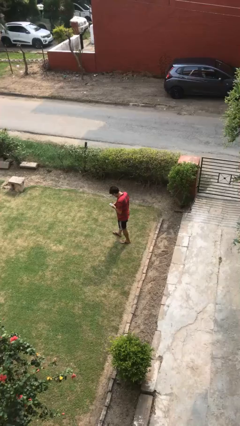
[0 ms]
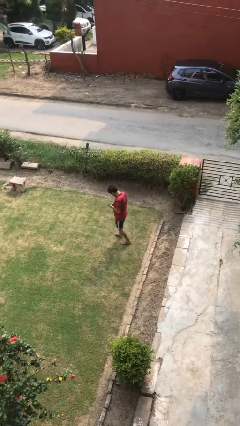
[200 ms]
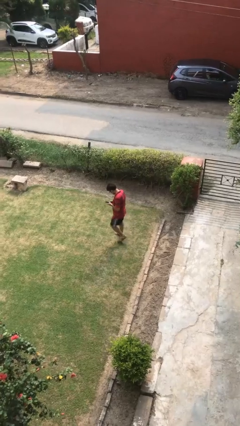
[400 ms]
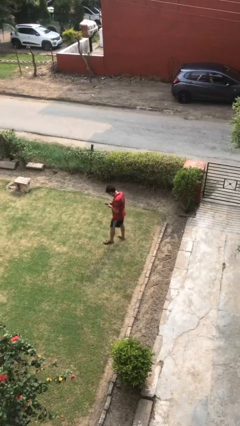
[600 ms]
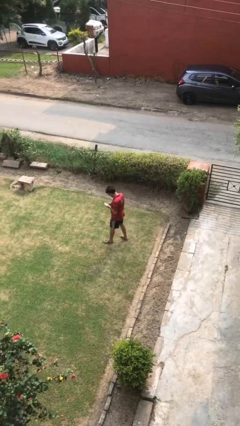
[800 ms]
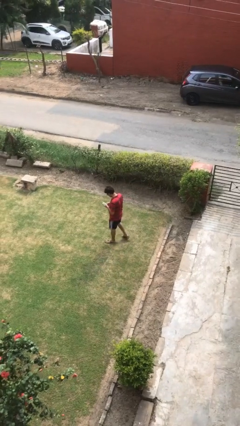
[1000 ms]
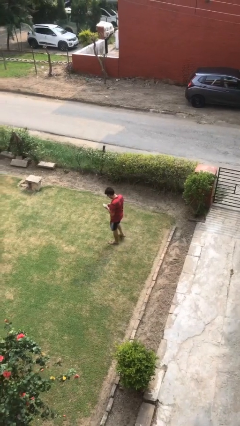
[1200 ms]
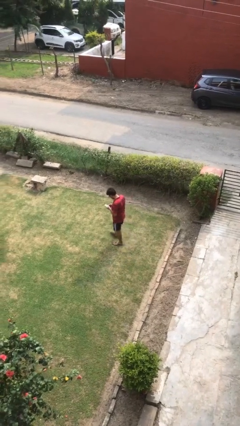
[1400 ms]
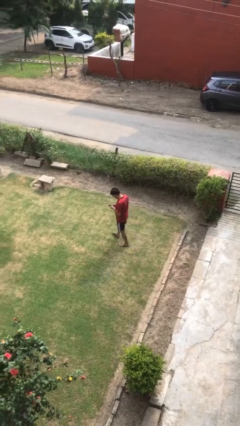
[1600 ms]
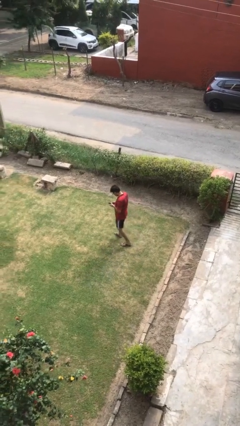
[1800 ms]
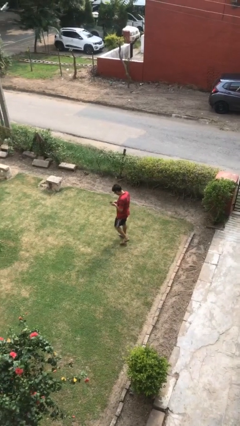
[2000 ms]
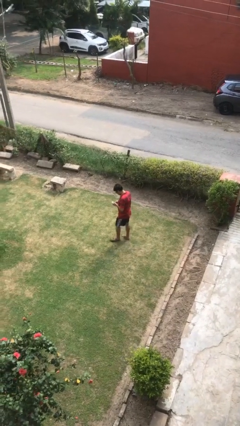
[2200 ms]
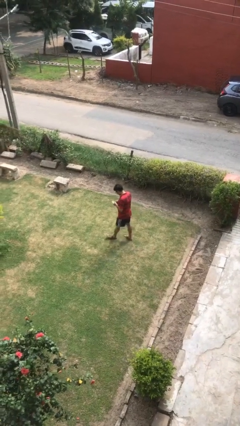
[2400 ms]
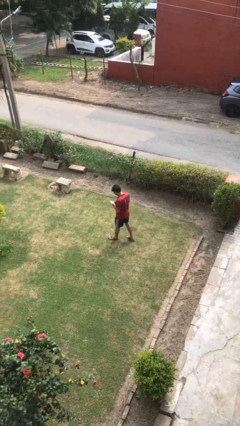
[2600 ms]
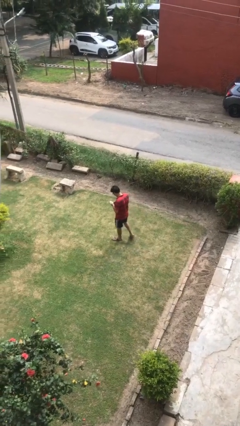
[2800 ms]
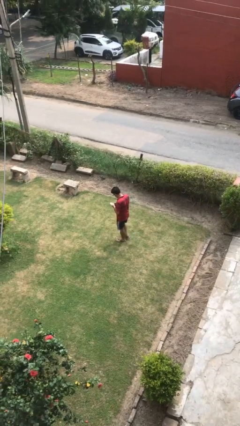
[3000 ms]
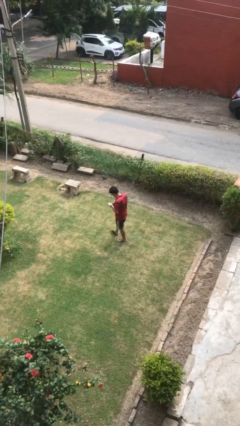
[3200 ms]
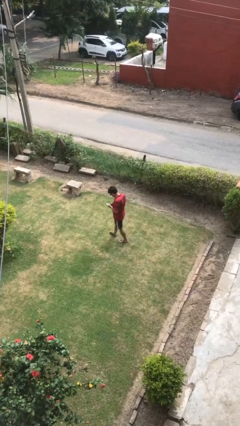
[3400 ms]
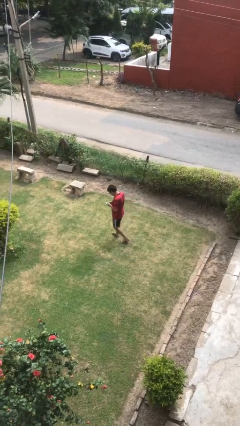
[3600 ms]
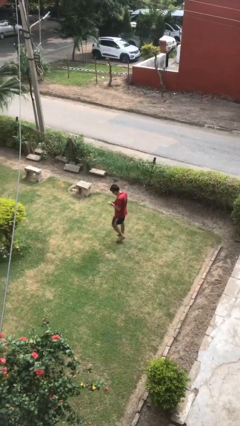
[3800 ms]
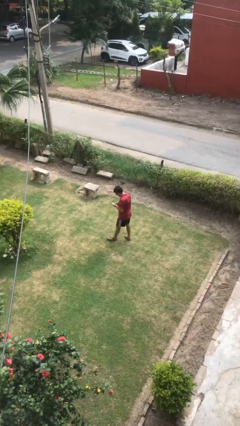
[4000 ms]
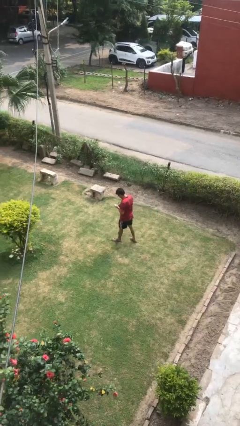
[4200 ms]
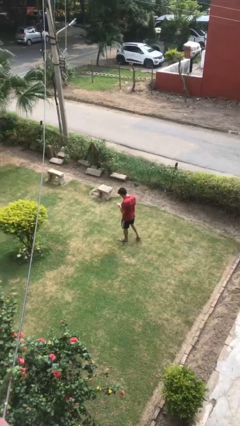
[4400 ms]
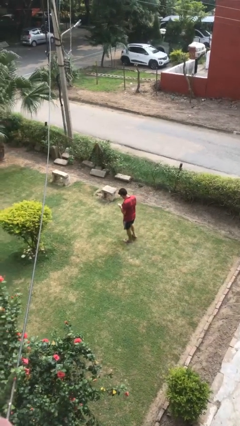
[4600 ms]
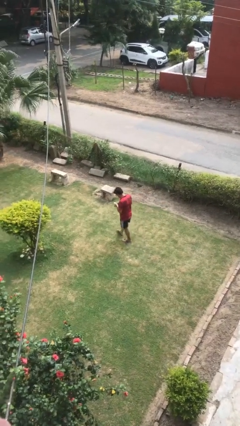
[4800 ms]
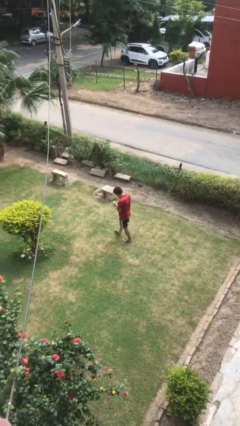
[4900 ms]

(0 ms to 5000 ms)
person texts on phone

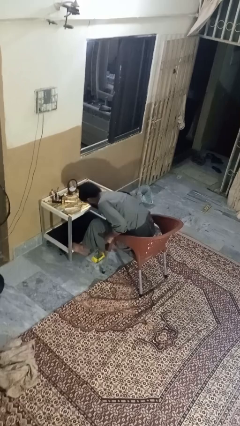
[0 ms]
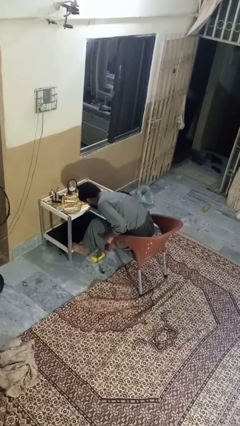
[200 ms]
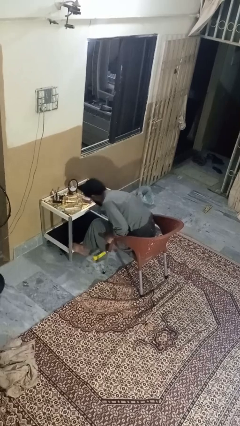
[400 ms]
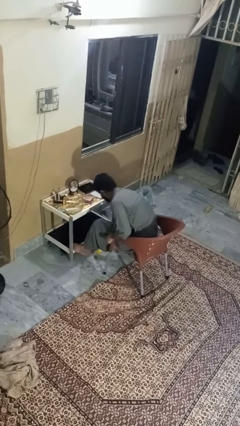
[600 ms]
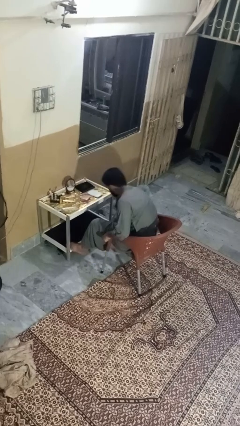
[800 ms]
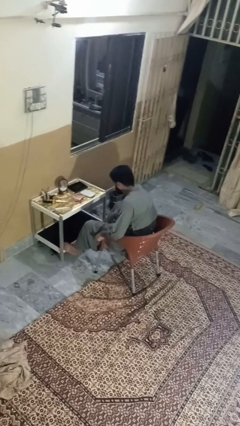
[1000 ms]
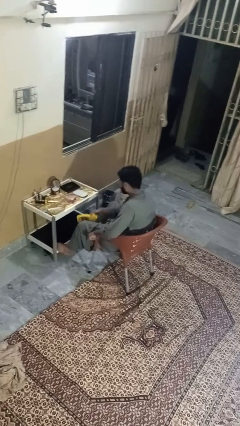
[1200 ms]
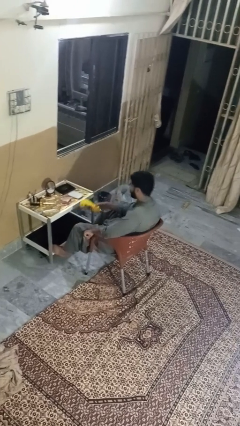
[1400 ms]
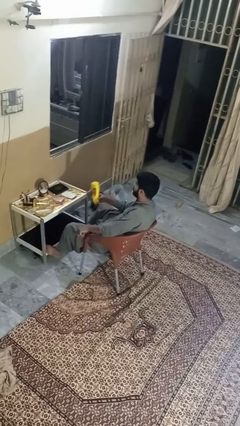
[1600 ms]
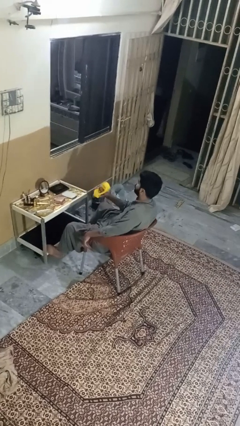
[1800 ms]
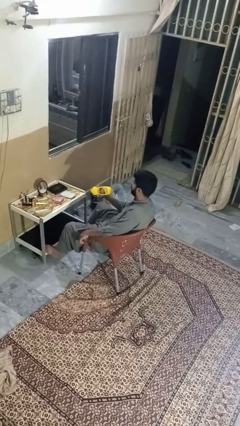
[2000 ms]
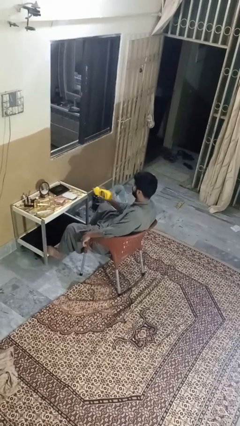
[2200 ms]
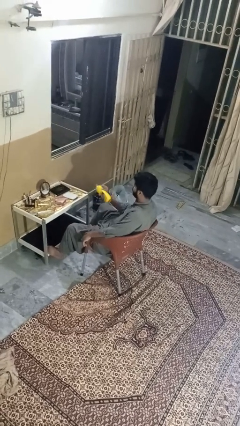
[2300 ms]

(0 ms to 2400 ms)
person picks up object from floor

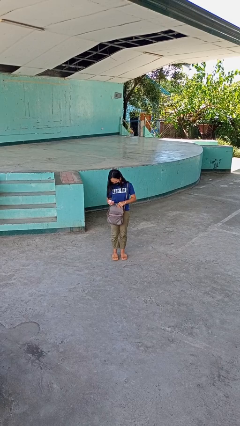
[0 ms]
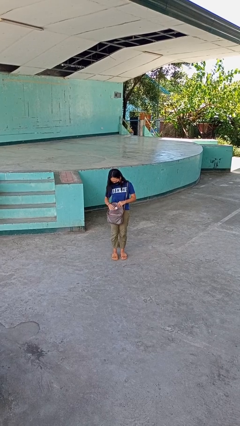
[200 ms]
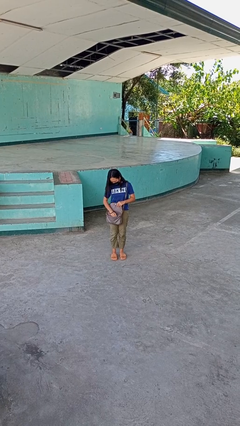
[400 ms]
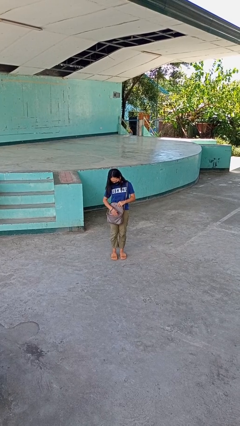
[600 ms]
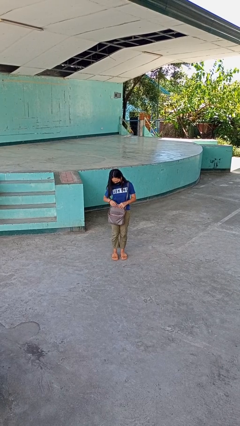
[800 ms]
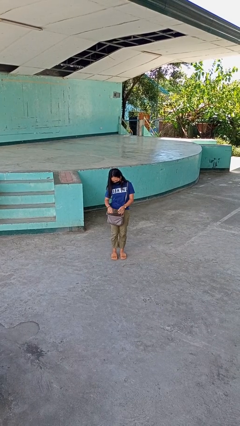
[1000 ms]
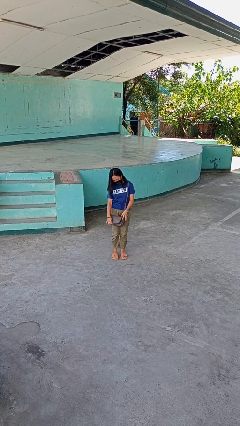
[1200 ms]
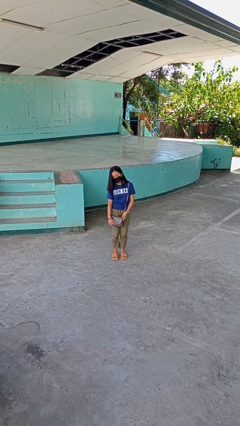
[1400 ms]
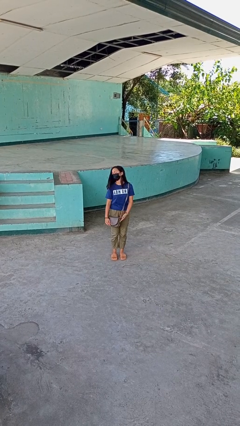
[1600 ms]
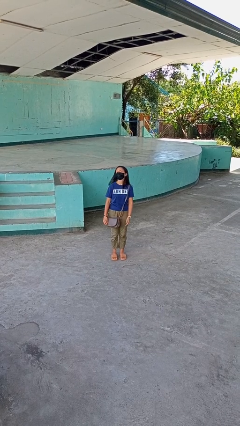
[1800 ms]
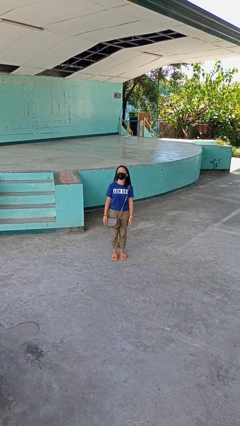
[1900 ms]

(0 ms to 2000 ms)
person puts object into purse

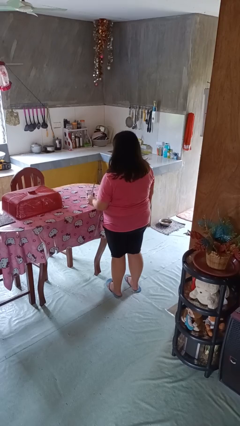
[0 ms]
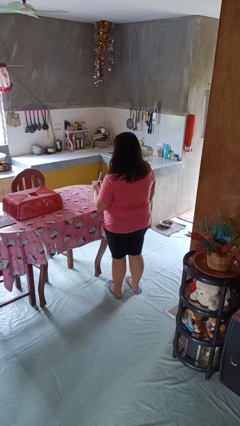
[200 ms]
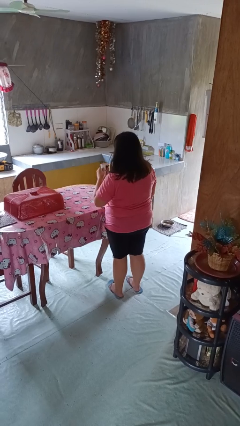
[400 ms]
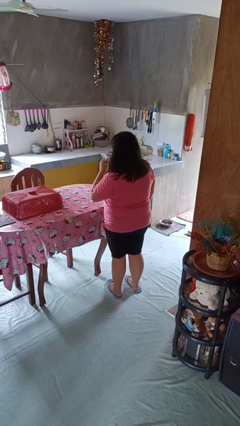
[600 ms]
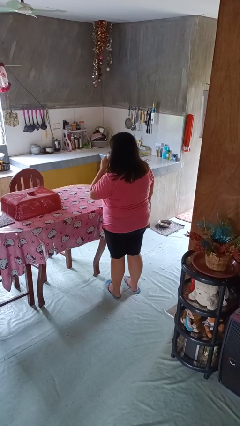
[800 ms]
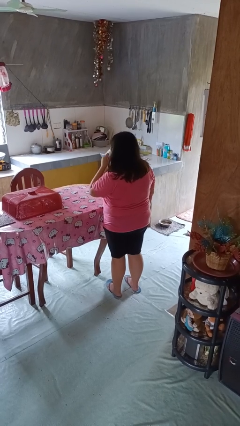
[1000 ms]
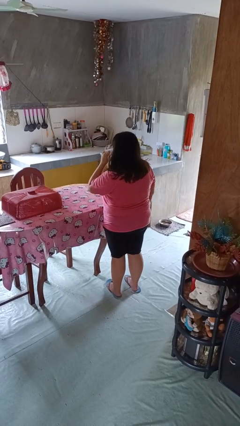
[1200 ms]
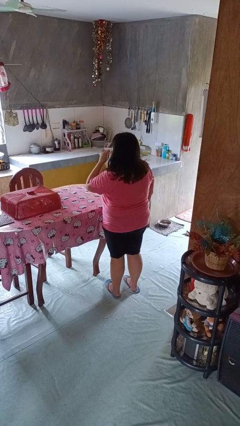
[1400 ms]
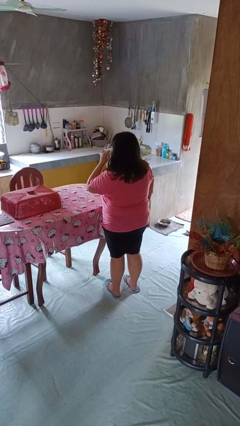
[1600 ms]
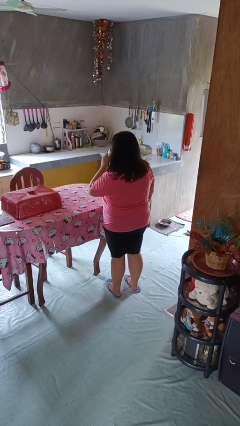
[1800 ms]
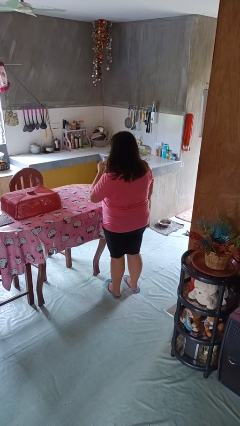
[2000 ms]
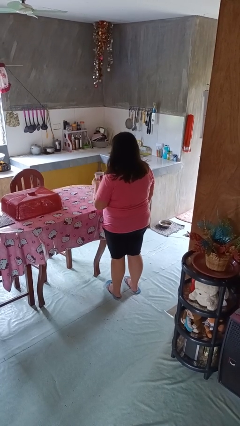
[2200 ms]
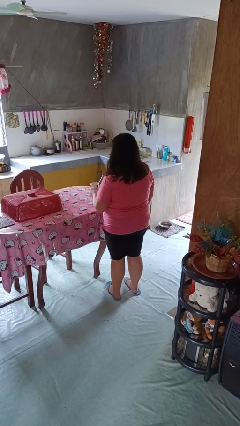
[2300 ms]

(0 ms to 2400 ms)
person drinks from mug

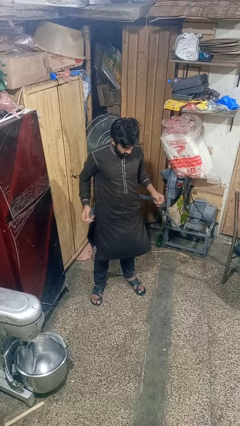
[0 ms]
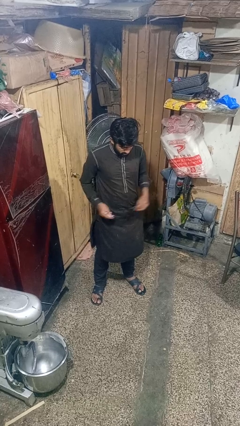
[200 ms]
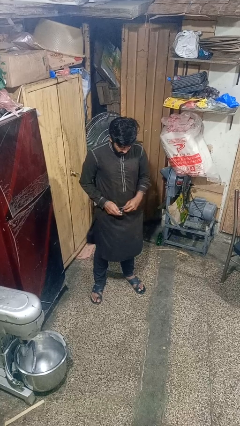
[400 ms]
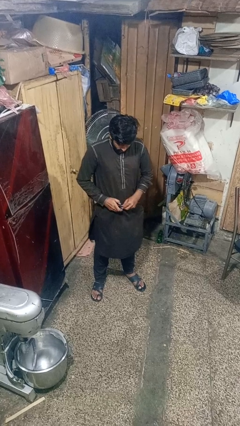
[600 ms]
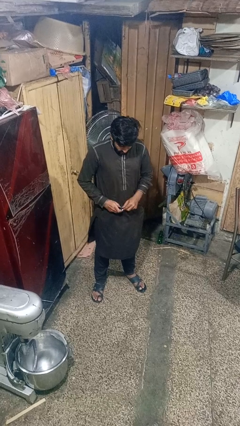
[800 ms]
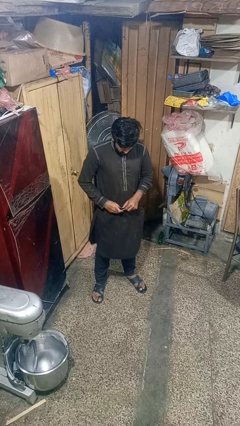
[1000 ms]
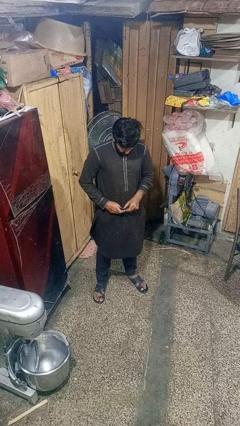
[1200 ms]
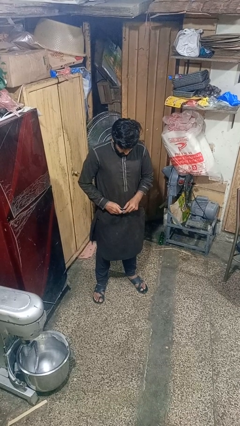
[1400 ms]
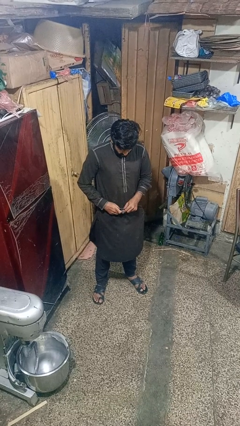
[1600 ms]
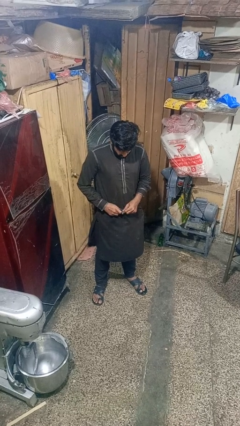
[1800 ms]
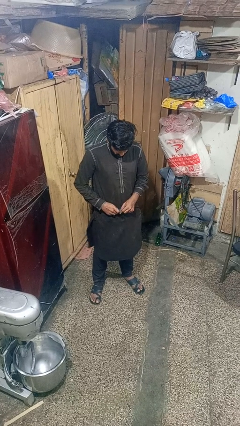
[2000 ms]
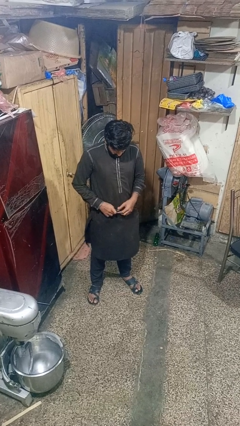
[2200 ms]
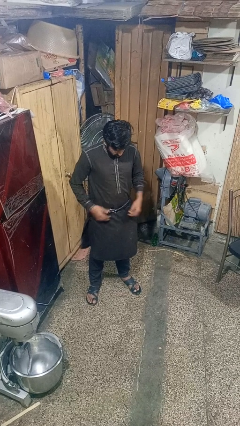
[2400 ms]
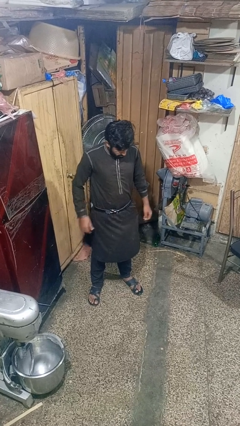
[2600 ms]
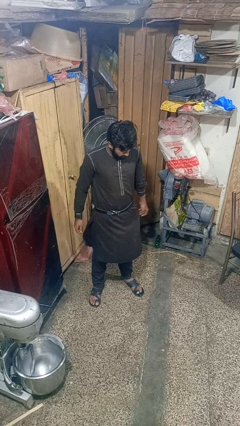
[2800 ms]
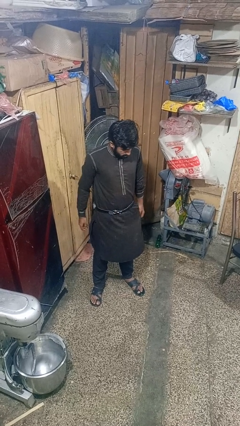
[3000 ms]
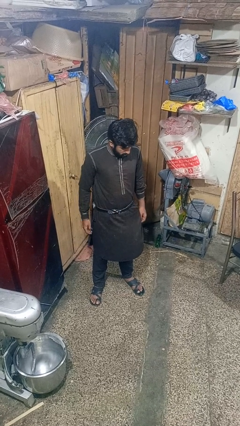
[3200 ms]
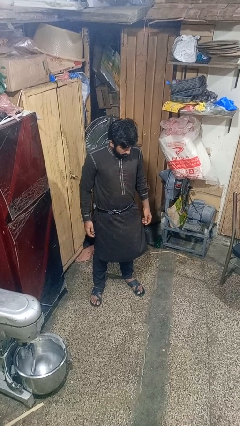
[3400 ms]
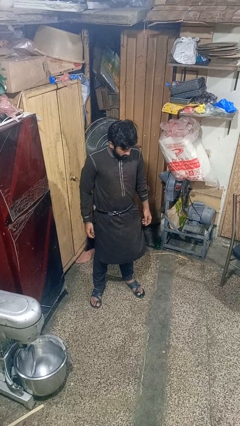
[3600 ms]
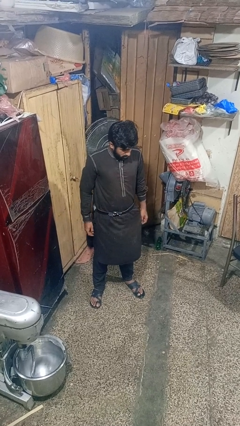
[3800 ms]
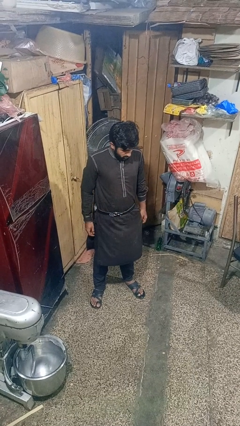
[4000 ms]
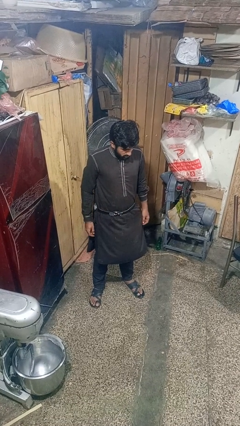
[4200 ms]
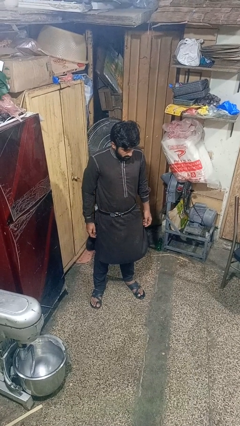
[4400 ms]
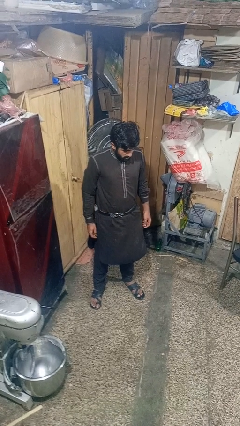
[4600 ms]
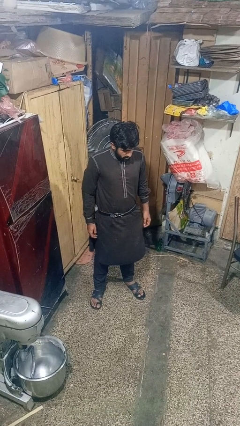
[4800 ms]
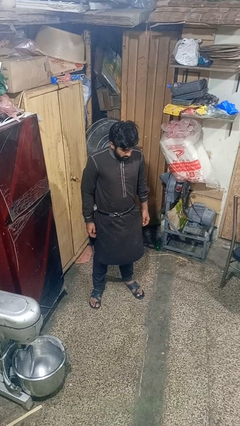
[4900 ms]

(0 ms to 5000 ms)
person puts on belt

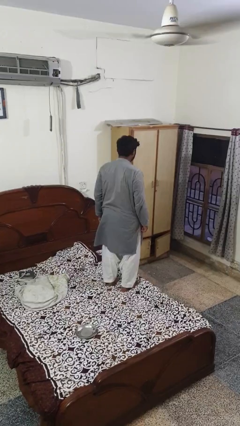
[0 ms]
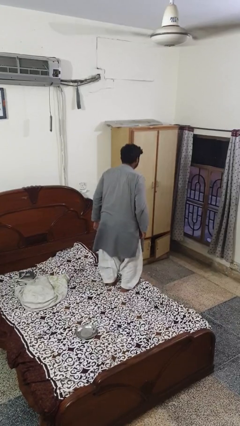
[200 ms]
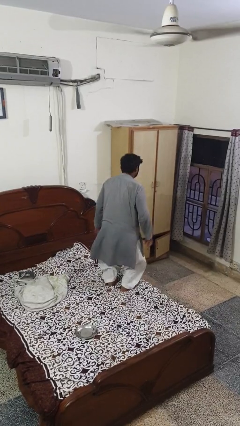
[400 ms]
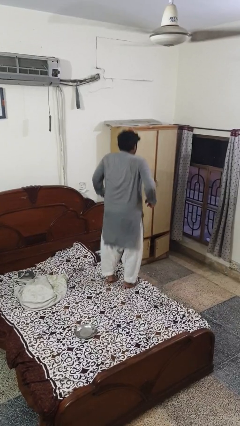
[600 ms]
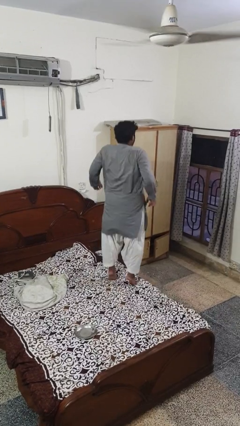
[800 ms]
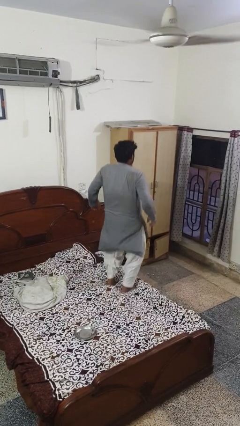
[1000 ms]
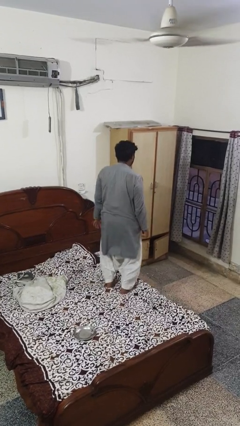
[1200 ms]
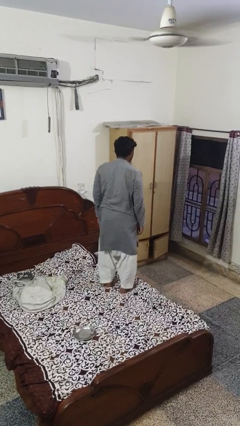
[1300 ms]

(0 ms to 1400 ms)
person jumps on bed
